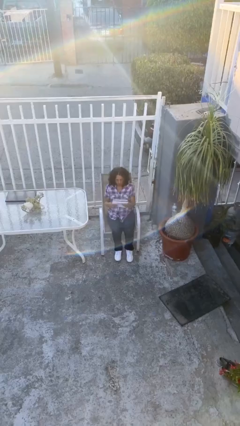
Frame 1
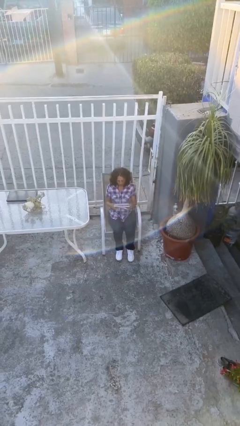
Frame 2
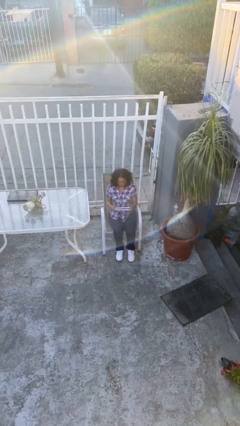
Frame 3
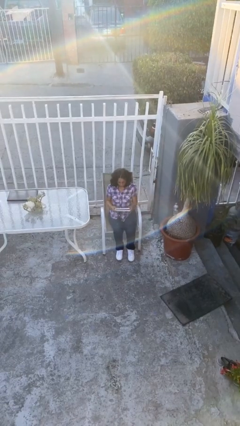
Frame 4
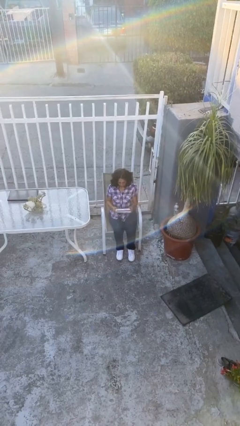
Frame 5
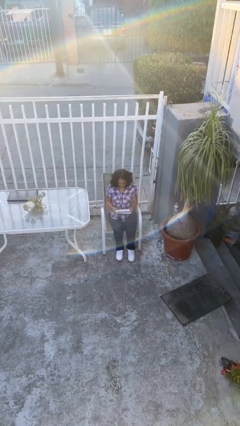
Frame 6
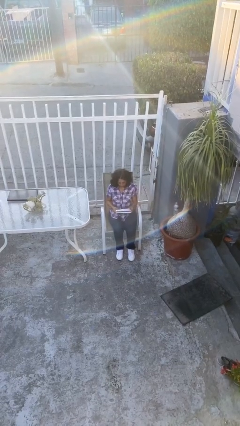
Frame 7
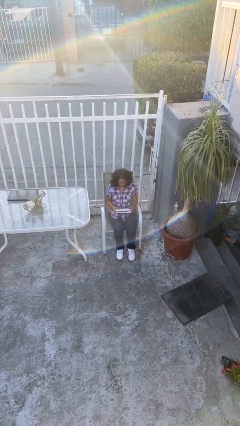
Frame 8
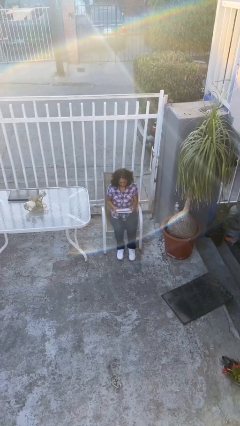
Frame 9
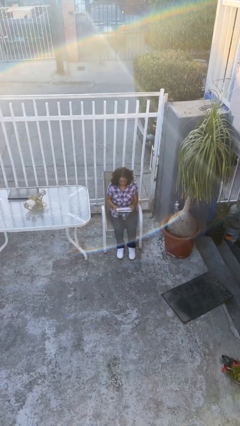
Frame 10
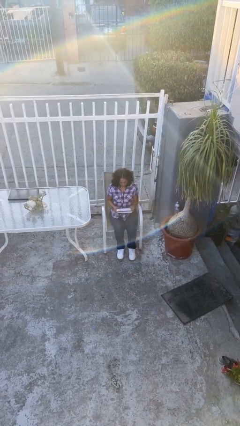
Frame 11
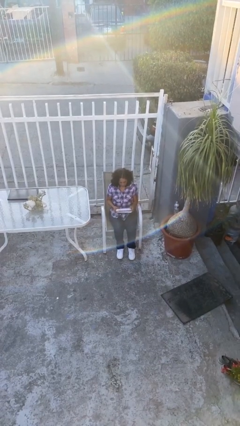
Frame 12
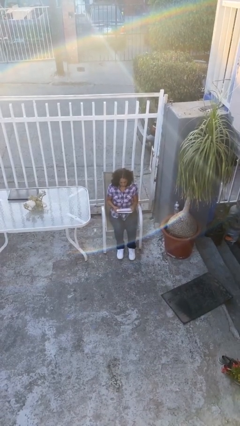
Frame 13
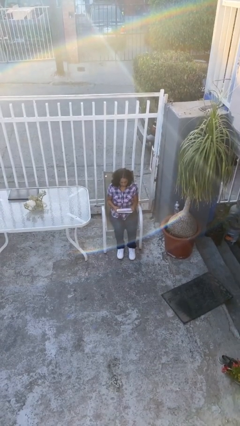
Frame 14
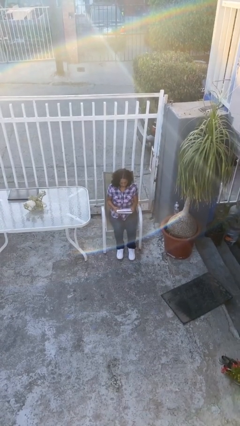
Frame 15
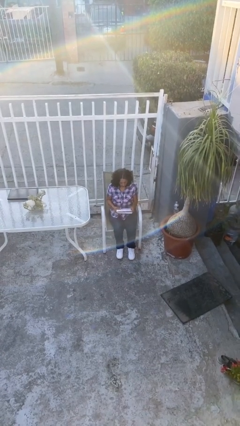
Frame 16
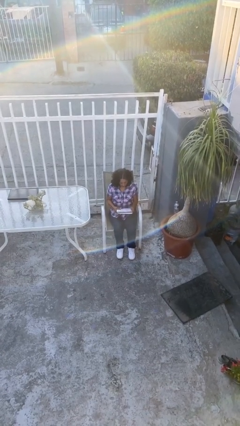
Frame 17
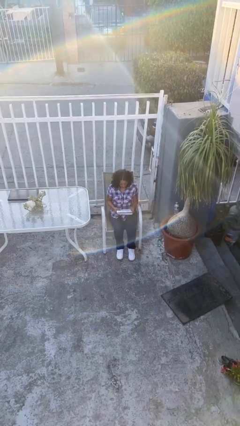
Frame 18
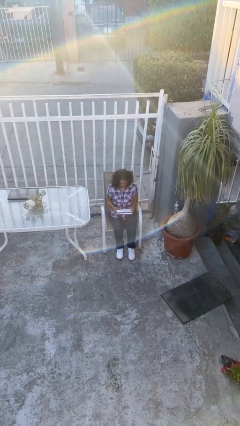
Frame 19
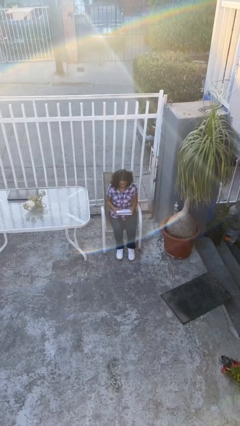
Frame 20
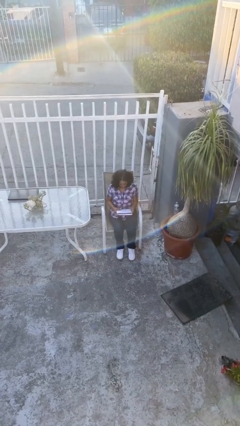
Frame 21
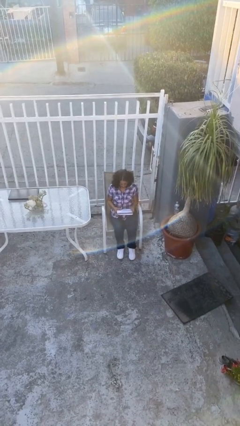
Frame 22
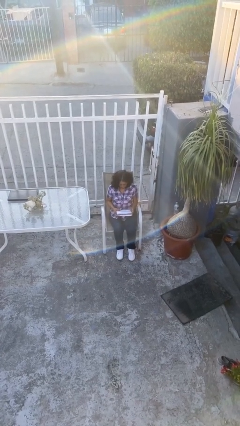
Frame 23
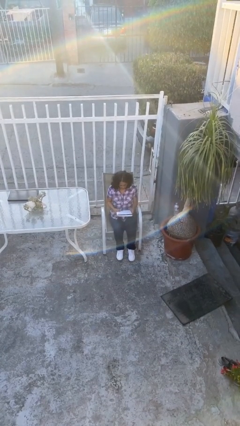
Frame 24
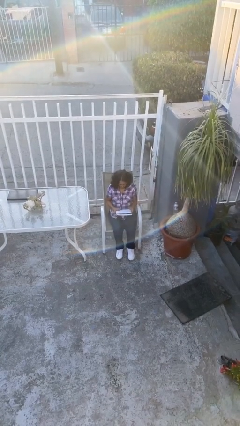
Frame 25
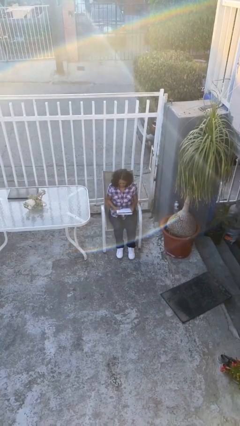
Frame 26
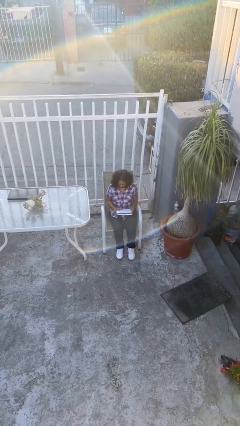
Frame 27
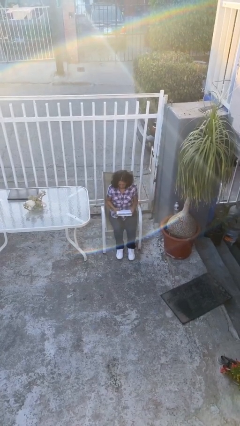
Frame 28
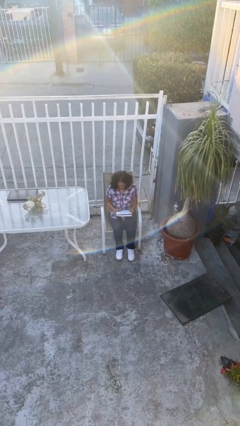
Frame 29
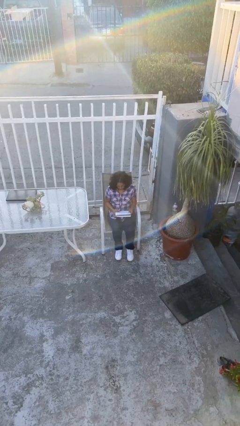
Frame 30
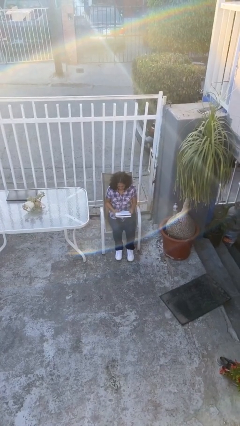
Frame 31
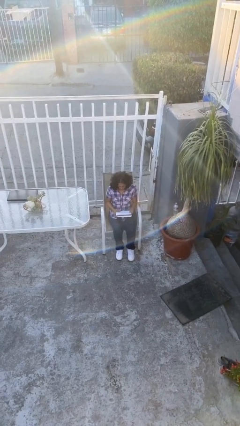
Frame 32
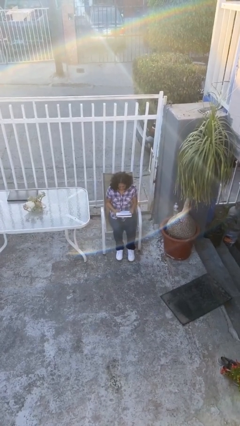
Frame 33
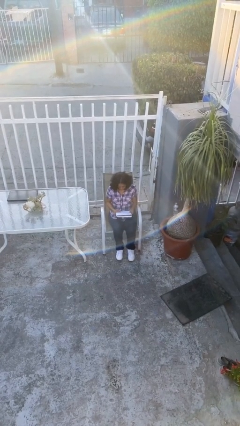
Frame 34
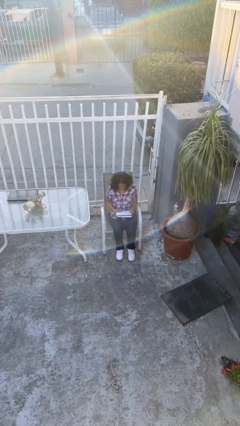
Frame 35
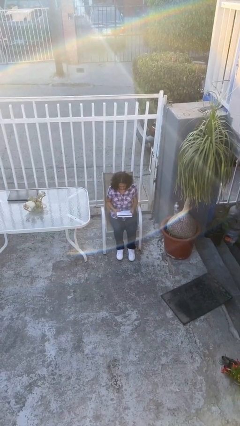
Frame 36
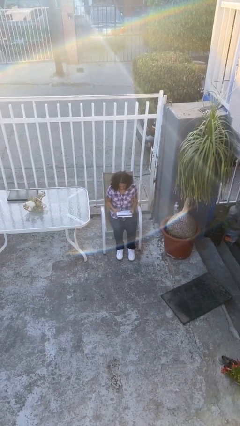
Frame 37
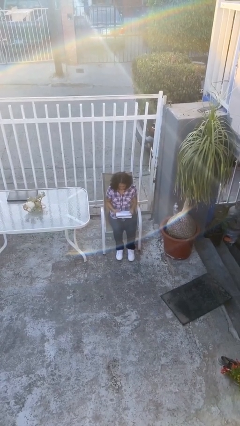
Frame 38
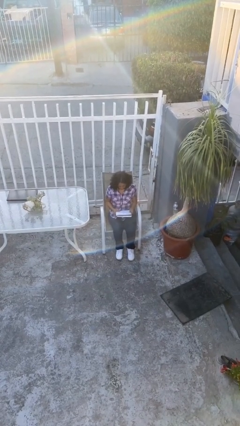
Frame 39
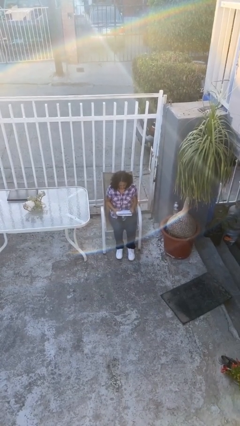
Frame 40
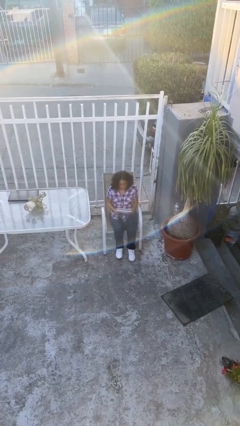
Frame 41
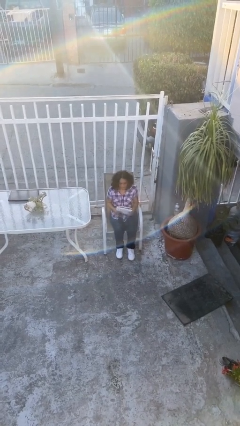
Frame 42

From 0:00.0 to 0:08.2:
person reads document

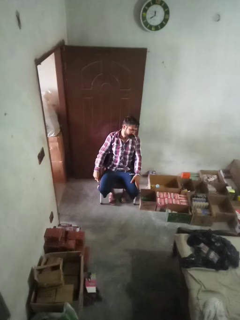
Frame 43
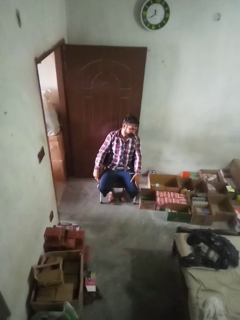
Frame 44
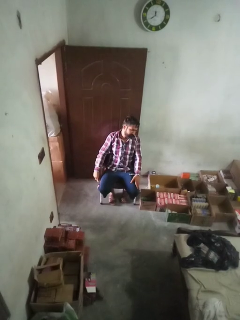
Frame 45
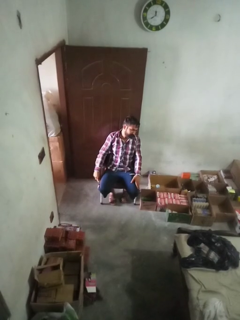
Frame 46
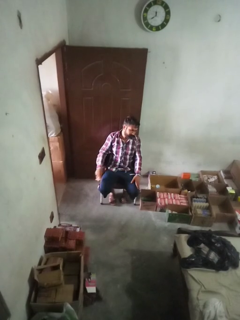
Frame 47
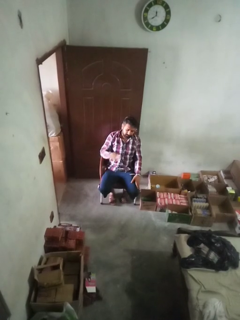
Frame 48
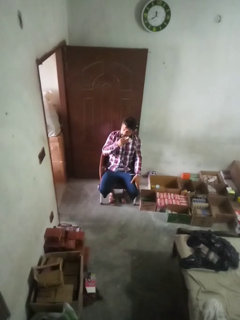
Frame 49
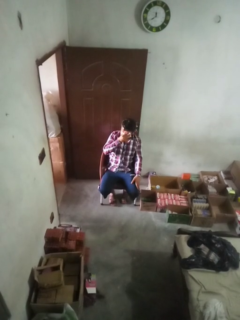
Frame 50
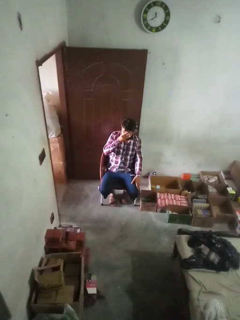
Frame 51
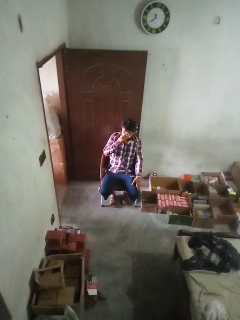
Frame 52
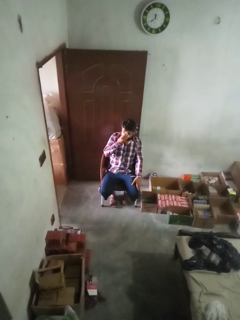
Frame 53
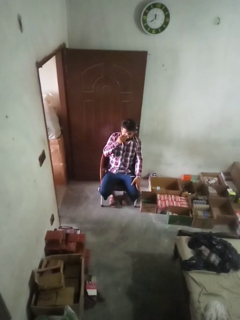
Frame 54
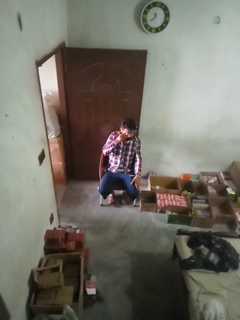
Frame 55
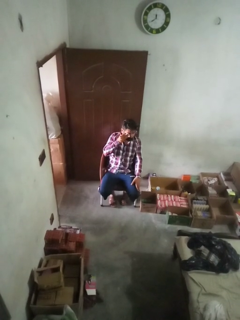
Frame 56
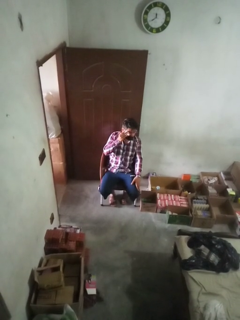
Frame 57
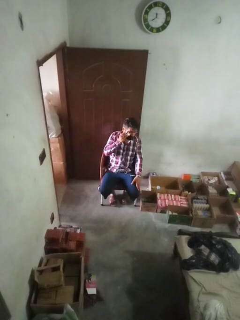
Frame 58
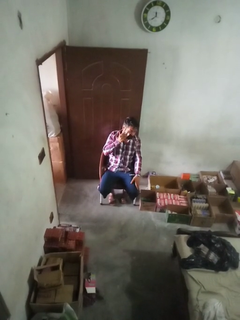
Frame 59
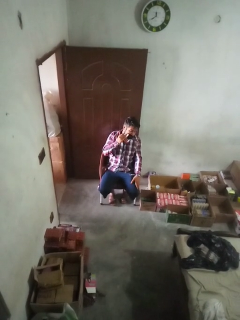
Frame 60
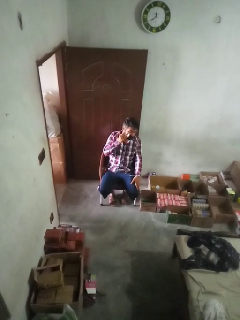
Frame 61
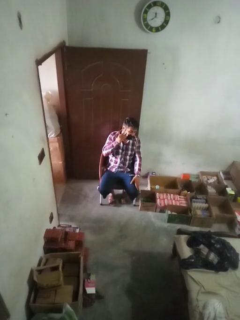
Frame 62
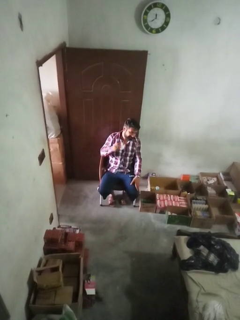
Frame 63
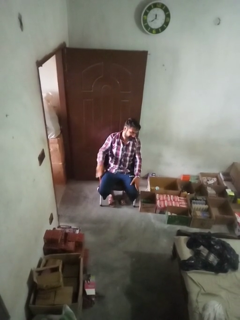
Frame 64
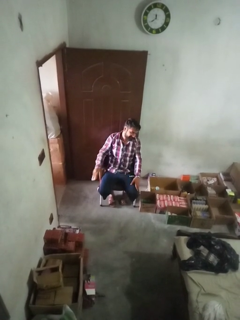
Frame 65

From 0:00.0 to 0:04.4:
person wipes mouth with napkin

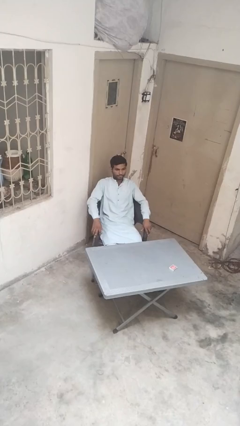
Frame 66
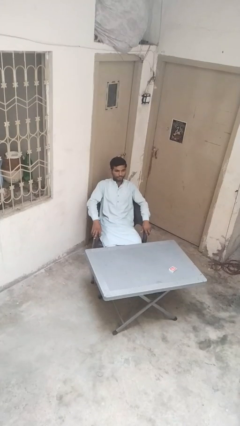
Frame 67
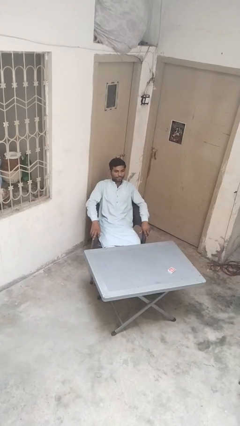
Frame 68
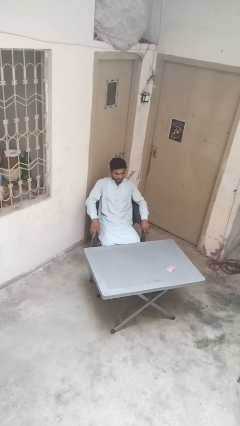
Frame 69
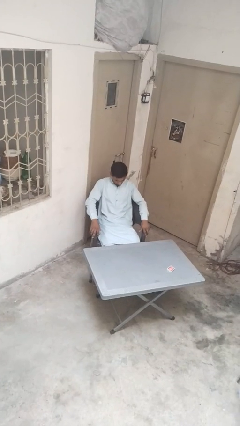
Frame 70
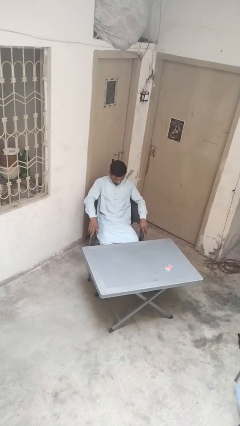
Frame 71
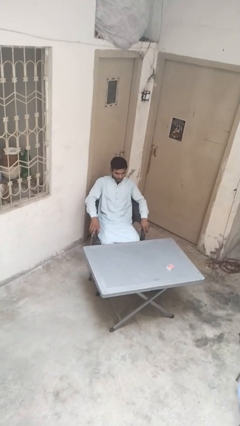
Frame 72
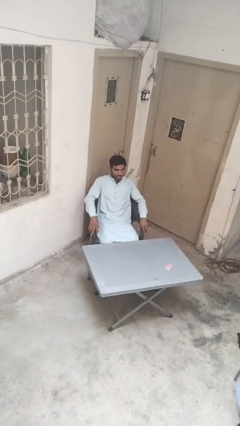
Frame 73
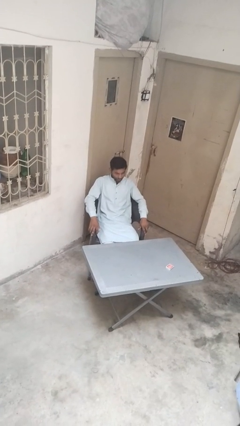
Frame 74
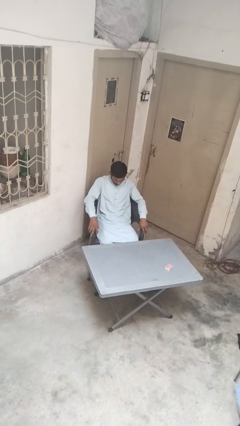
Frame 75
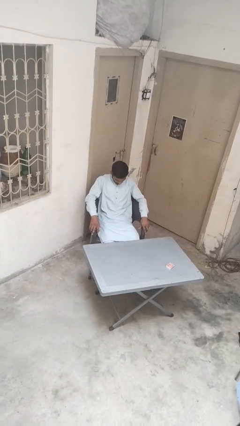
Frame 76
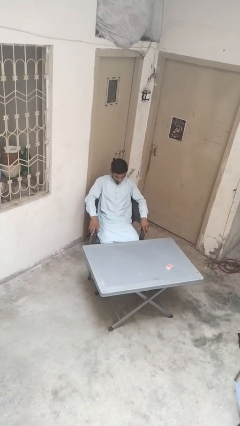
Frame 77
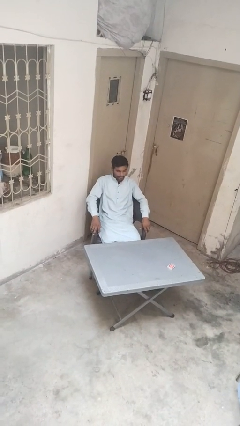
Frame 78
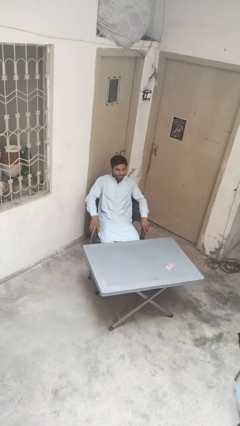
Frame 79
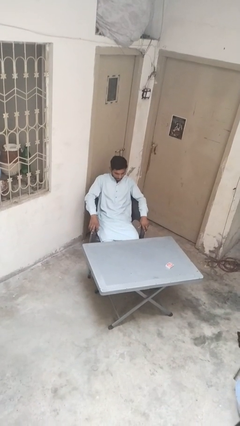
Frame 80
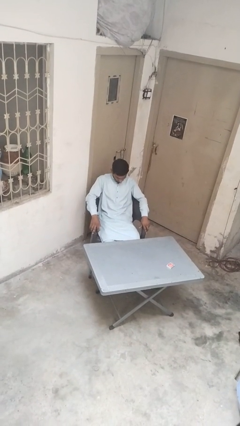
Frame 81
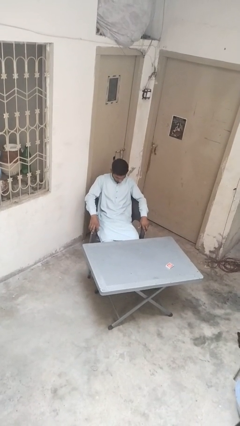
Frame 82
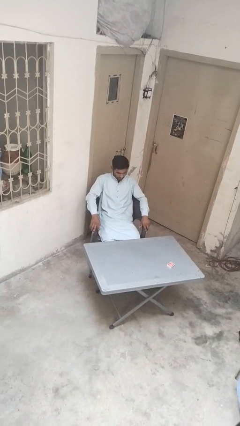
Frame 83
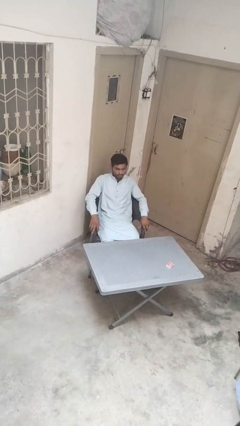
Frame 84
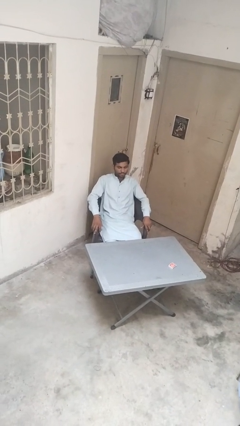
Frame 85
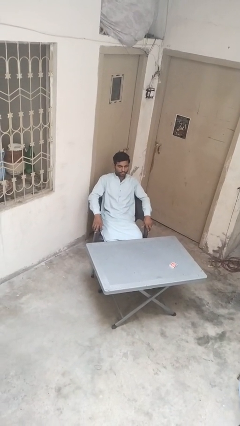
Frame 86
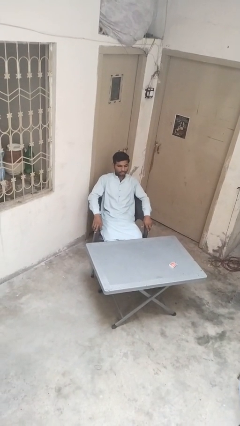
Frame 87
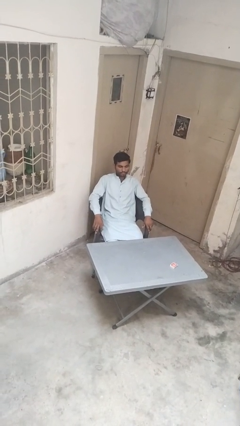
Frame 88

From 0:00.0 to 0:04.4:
person nods head

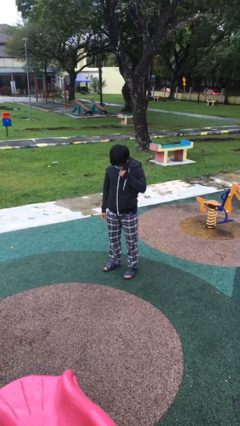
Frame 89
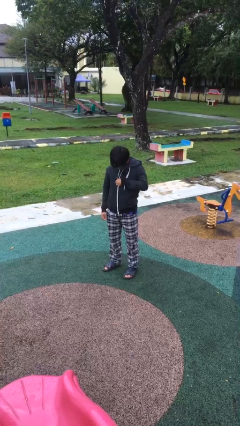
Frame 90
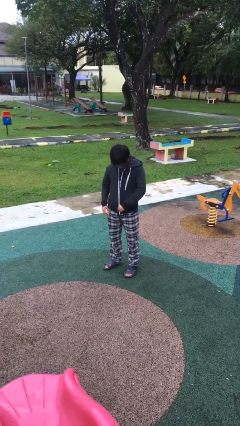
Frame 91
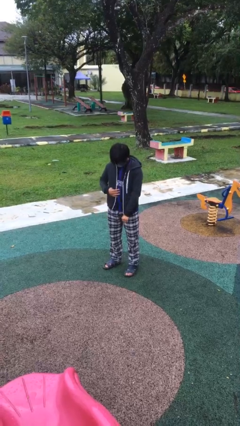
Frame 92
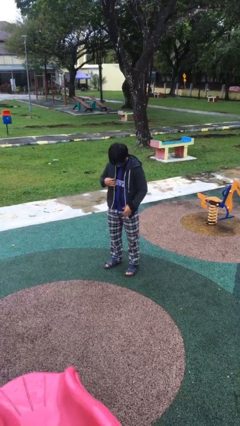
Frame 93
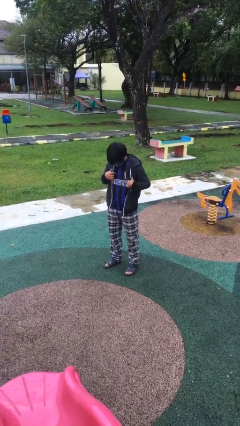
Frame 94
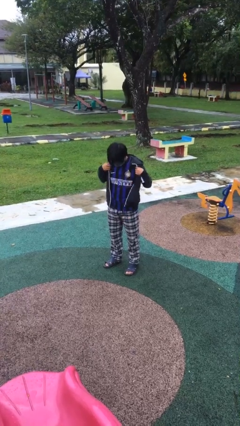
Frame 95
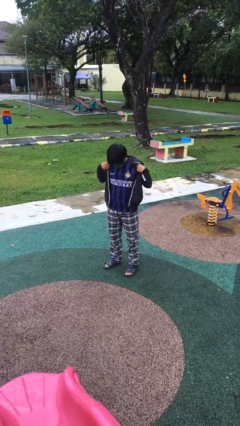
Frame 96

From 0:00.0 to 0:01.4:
person unzips jacket

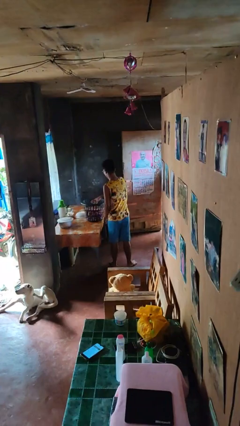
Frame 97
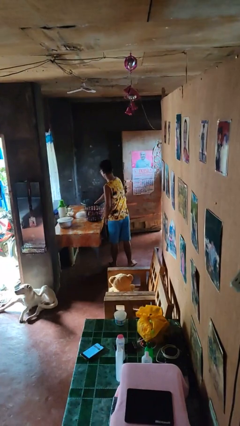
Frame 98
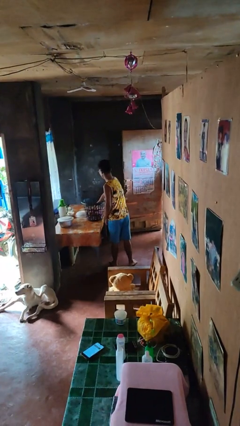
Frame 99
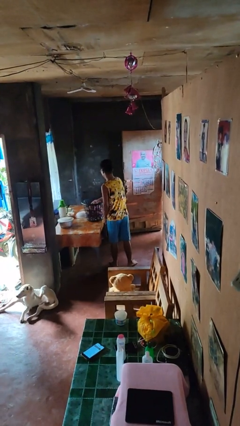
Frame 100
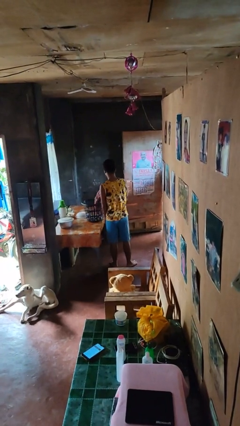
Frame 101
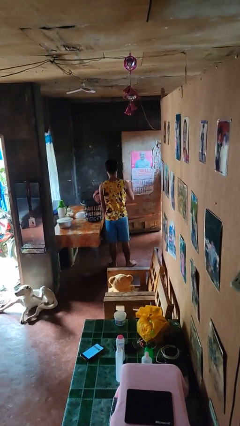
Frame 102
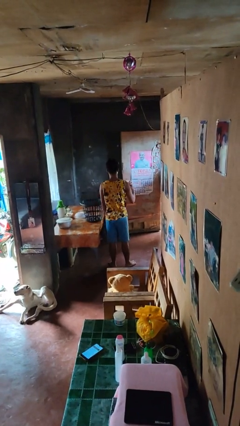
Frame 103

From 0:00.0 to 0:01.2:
person takes object from basket
